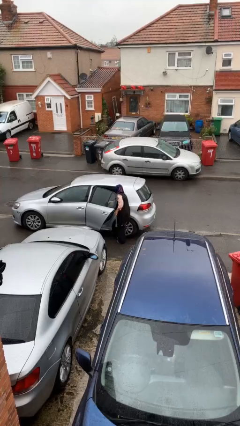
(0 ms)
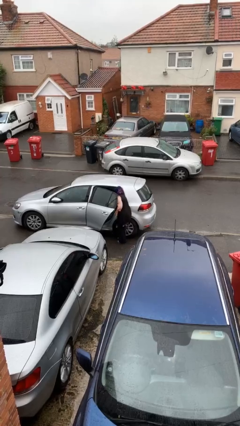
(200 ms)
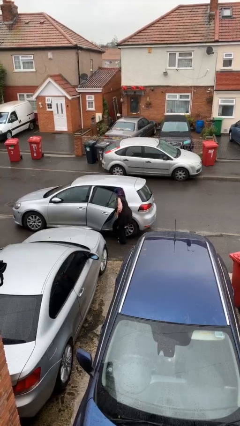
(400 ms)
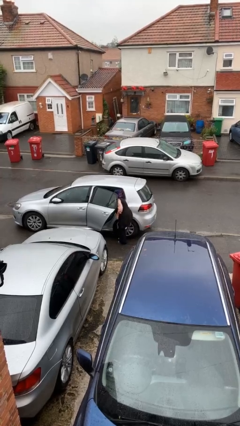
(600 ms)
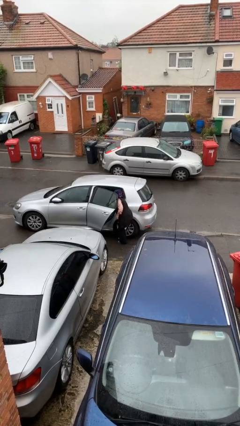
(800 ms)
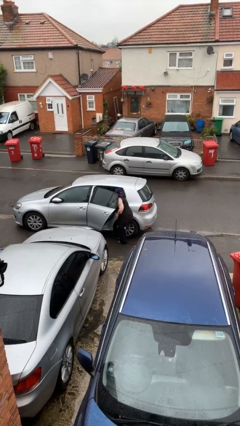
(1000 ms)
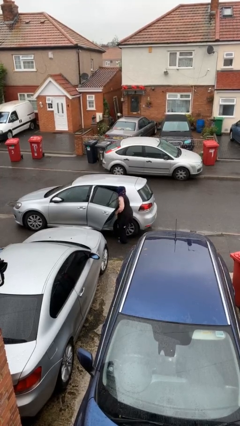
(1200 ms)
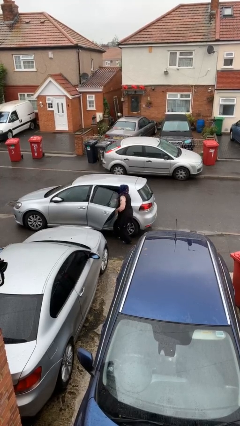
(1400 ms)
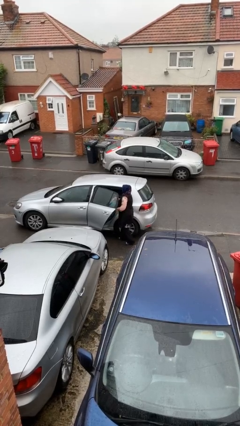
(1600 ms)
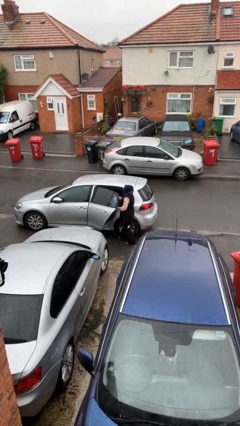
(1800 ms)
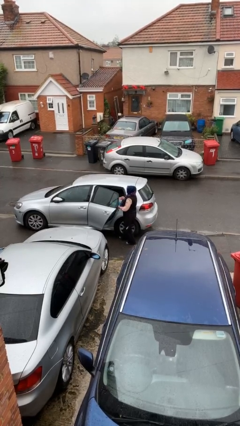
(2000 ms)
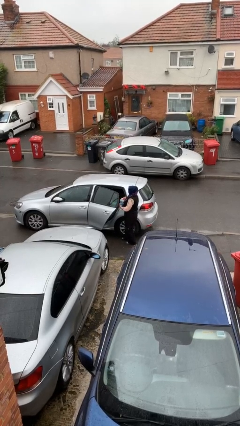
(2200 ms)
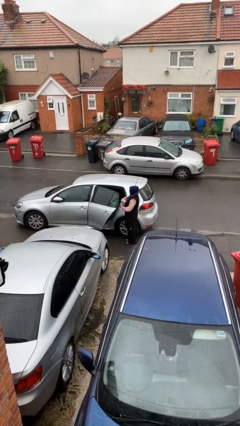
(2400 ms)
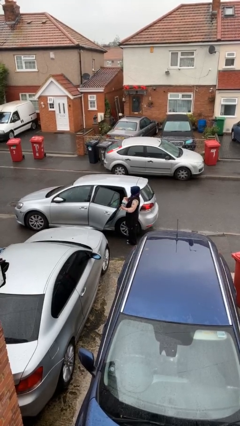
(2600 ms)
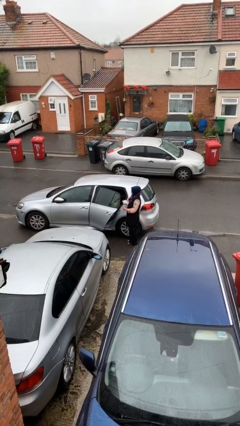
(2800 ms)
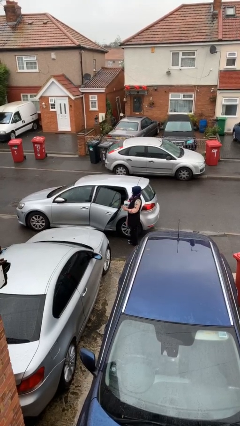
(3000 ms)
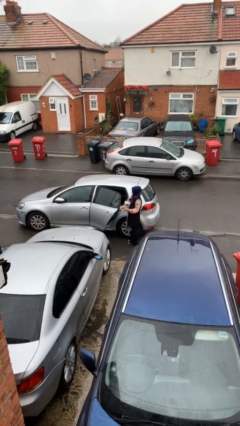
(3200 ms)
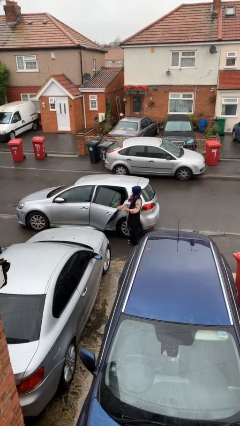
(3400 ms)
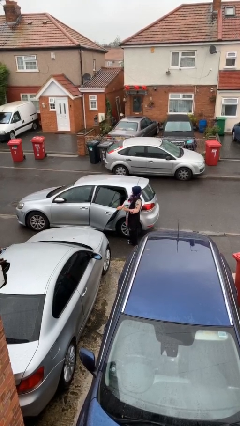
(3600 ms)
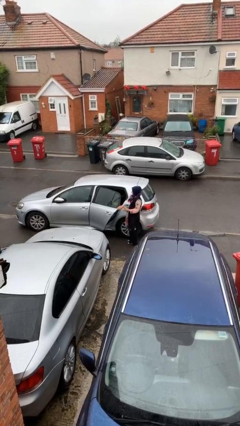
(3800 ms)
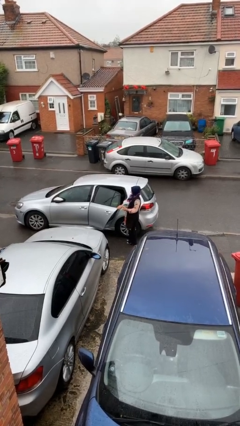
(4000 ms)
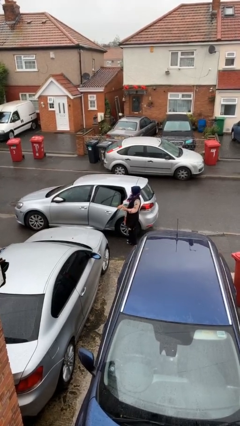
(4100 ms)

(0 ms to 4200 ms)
person unloads car

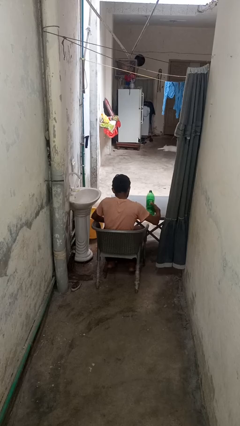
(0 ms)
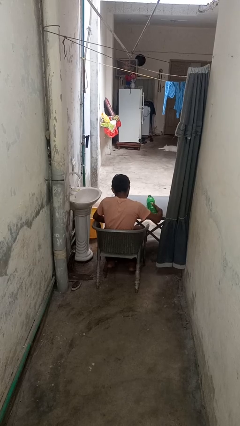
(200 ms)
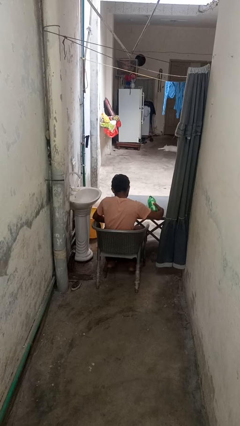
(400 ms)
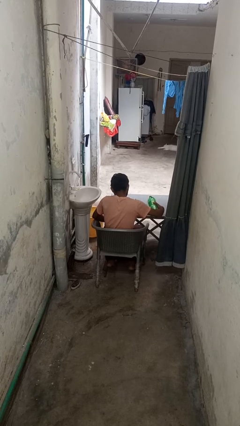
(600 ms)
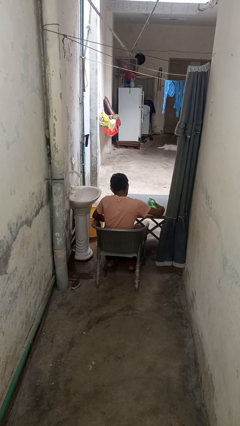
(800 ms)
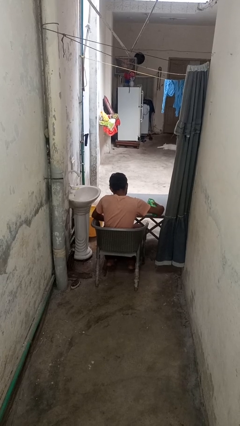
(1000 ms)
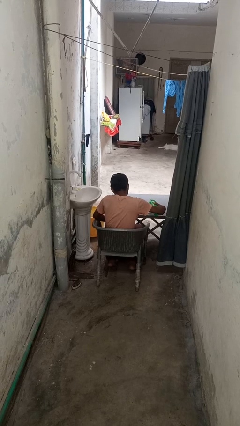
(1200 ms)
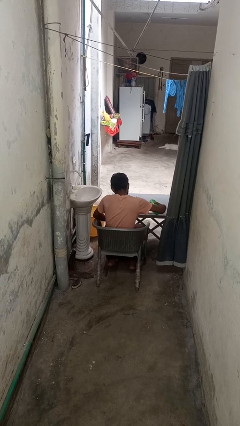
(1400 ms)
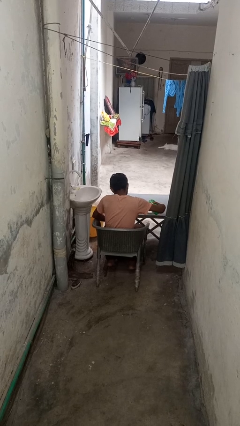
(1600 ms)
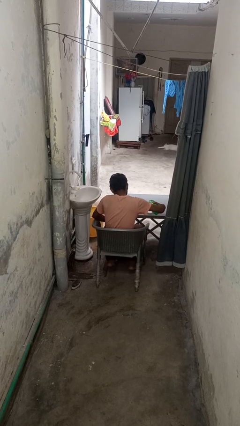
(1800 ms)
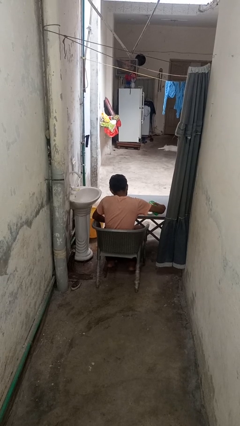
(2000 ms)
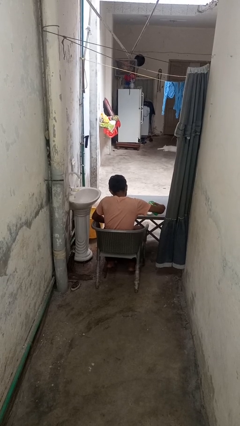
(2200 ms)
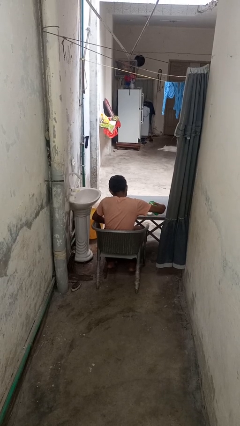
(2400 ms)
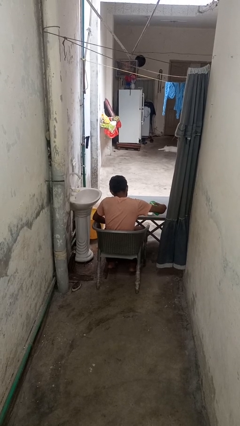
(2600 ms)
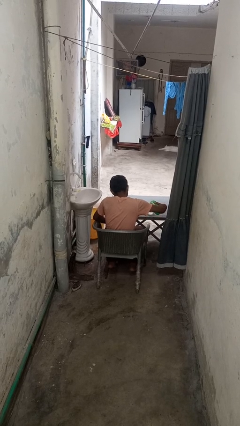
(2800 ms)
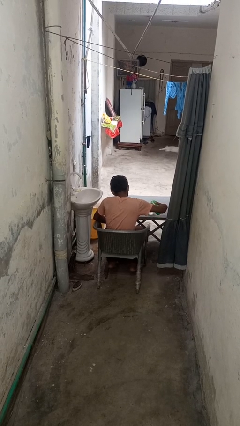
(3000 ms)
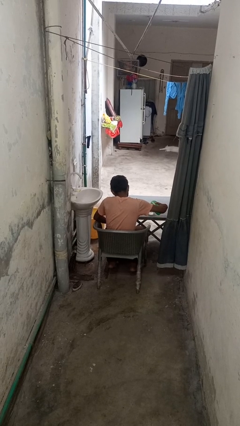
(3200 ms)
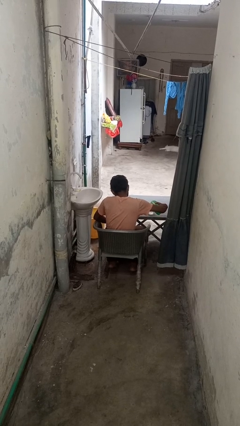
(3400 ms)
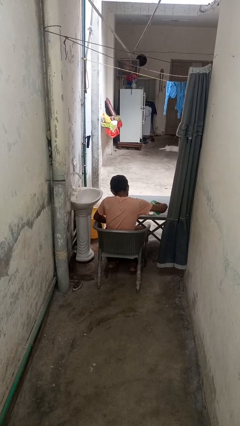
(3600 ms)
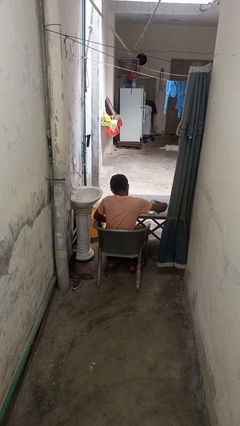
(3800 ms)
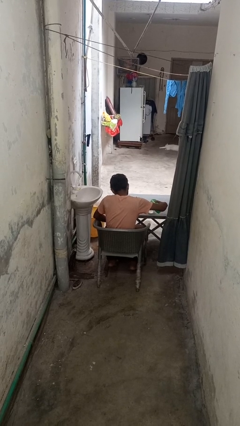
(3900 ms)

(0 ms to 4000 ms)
person pours liquid into cup

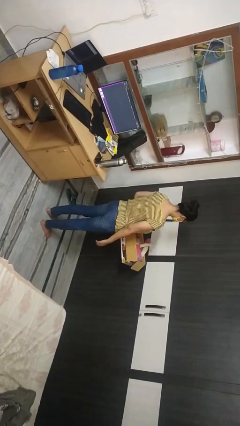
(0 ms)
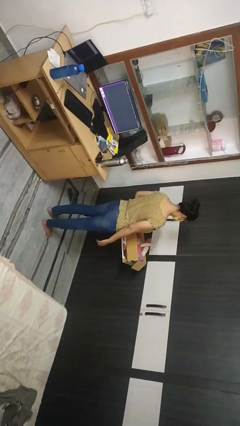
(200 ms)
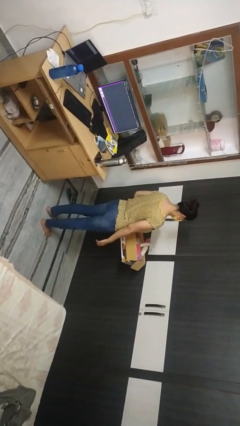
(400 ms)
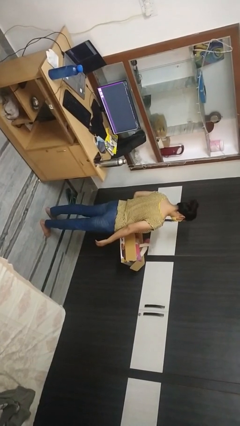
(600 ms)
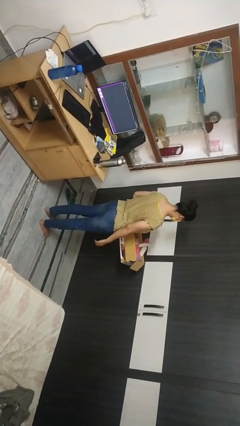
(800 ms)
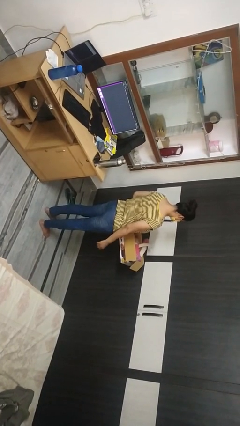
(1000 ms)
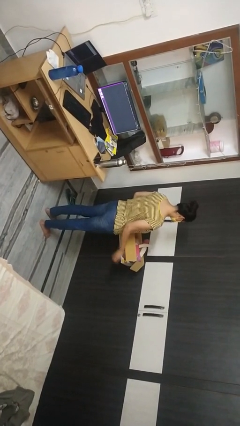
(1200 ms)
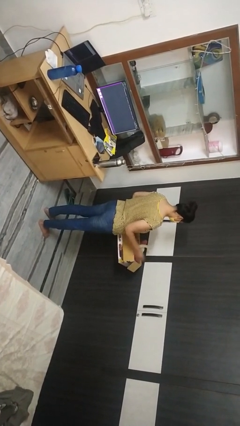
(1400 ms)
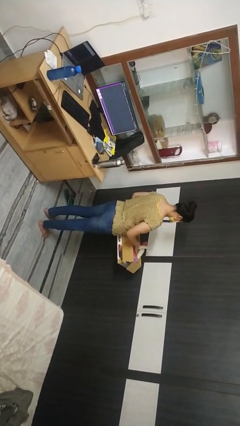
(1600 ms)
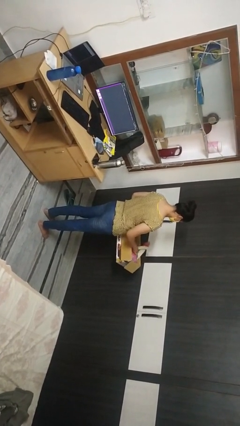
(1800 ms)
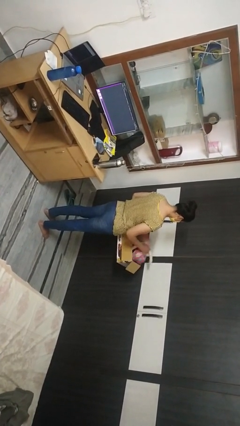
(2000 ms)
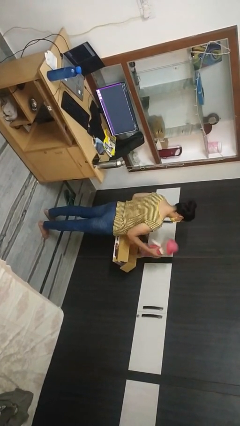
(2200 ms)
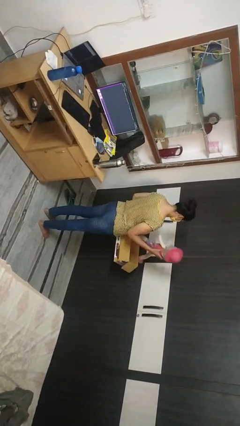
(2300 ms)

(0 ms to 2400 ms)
person takes object from box

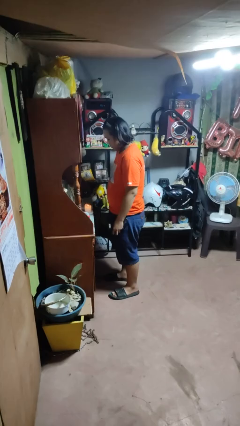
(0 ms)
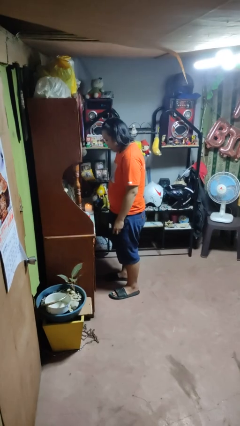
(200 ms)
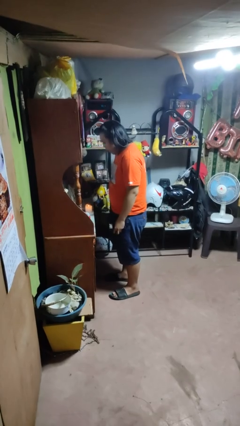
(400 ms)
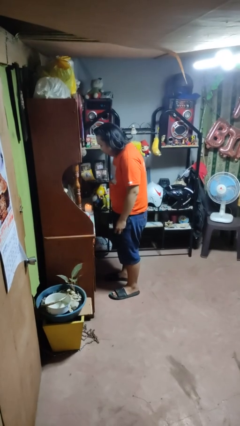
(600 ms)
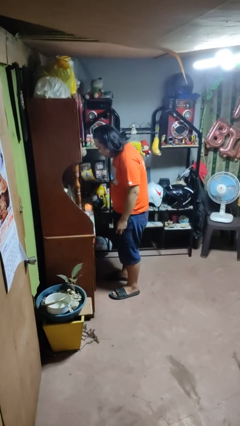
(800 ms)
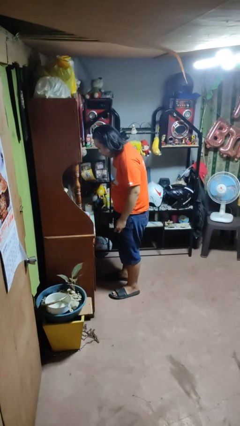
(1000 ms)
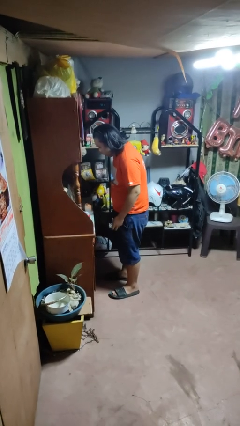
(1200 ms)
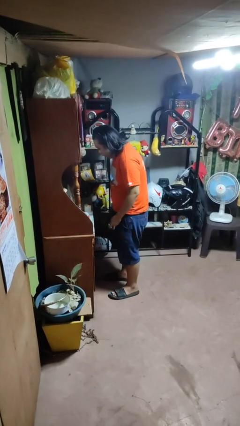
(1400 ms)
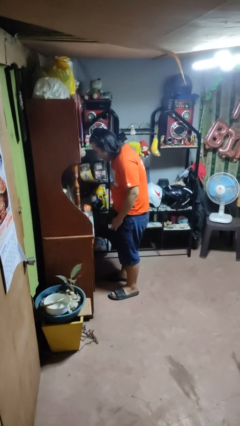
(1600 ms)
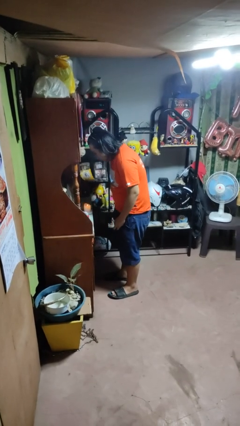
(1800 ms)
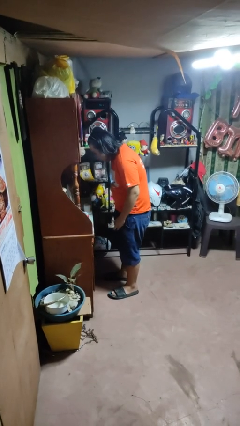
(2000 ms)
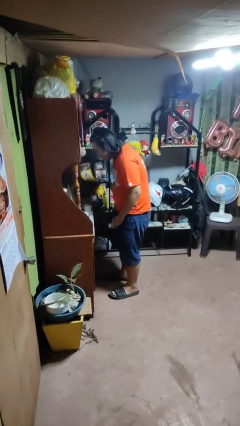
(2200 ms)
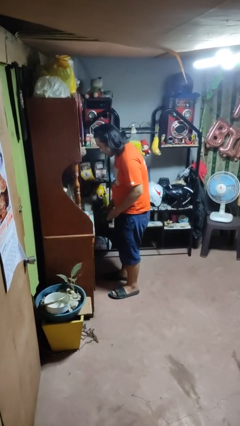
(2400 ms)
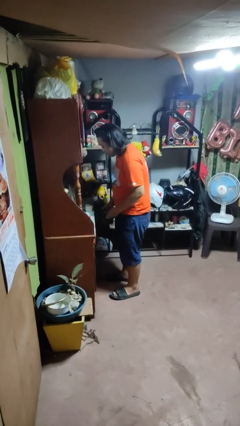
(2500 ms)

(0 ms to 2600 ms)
person extinguishes candle

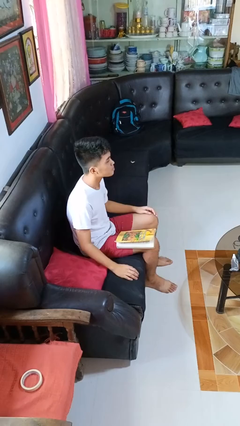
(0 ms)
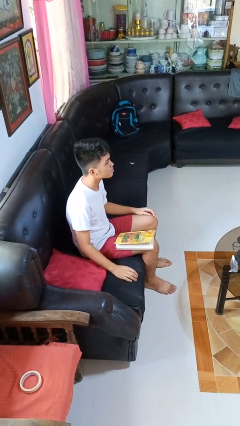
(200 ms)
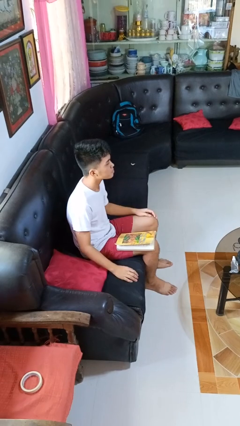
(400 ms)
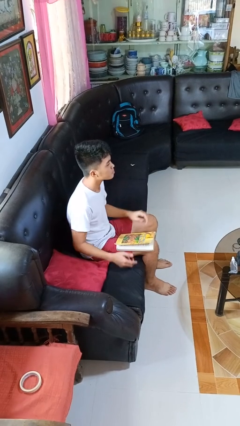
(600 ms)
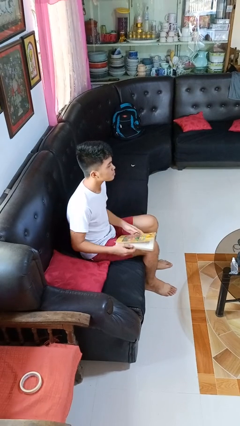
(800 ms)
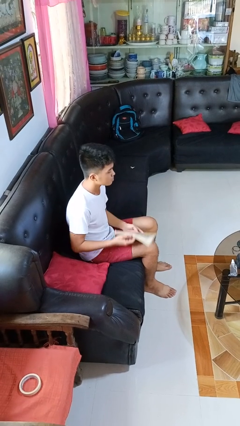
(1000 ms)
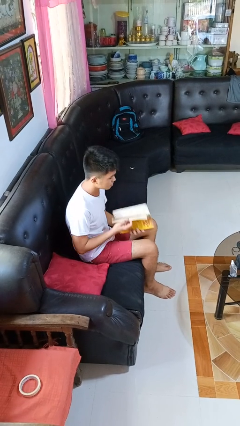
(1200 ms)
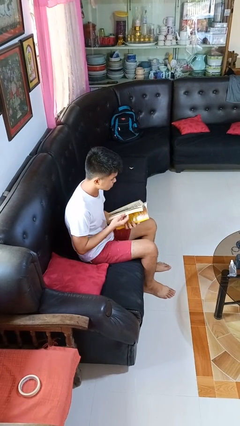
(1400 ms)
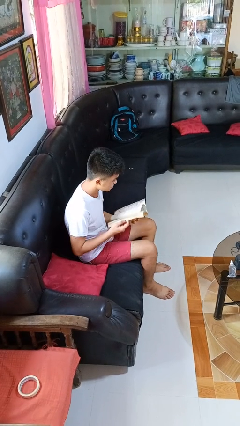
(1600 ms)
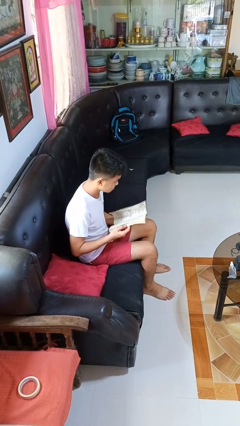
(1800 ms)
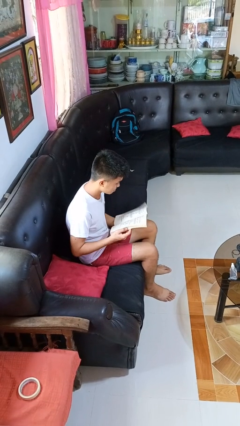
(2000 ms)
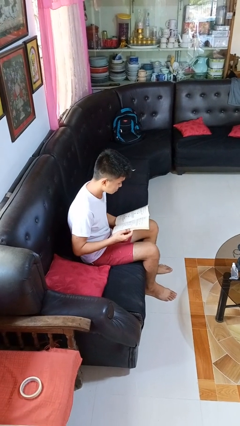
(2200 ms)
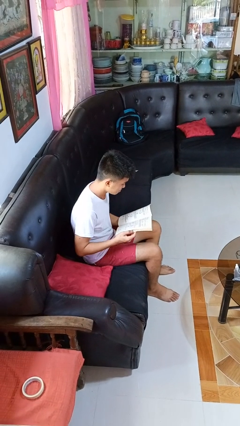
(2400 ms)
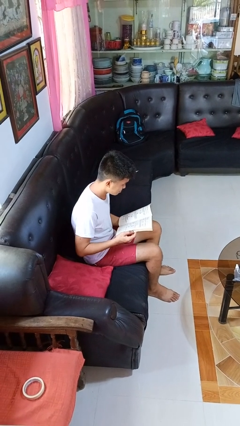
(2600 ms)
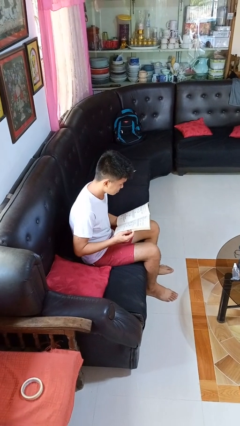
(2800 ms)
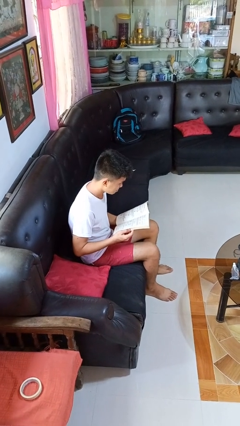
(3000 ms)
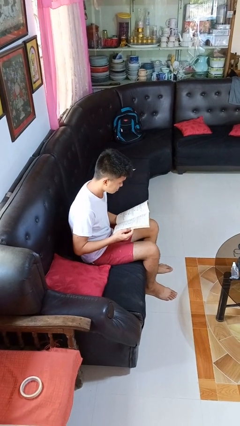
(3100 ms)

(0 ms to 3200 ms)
person reads book

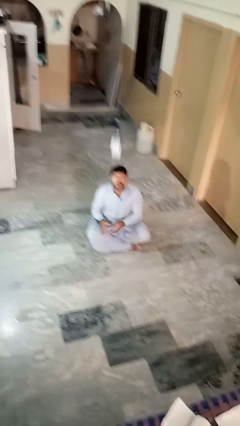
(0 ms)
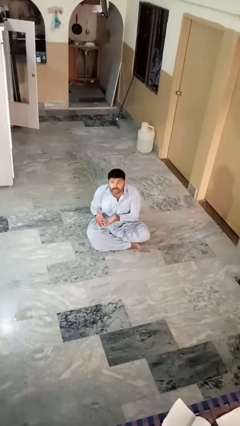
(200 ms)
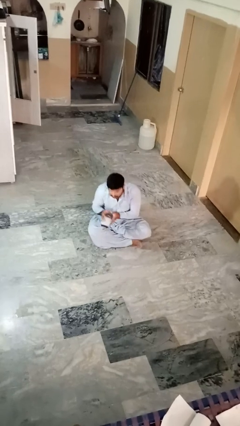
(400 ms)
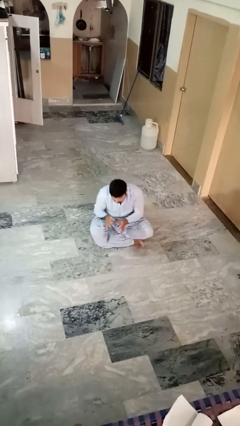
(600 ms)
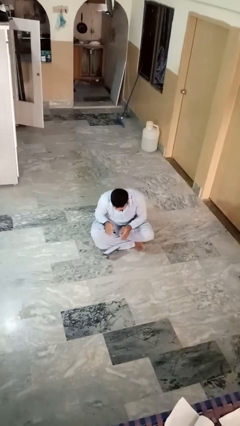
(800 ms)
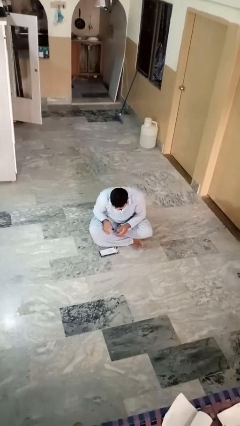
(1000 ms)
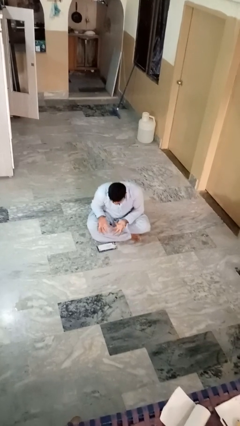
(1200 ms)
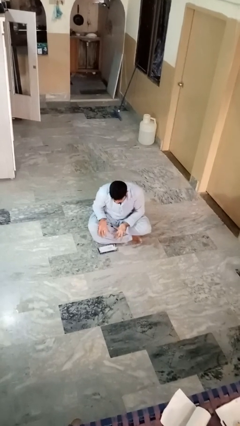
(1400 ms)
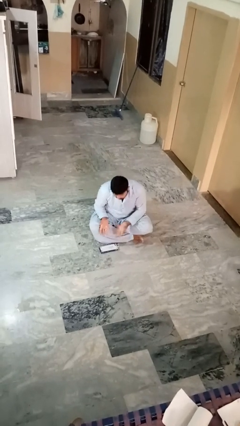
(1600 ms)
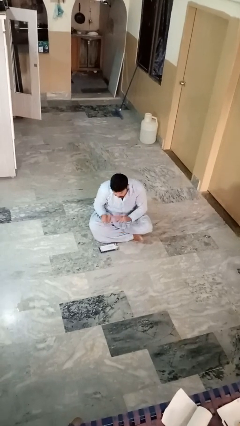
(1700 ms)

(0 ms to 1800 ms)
person catches dropped object
